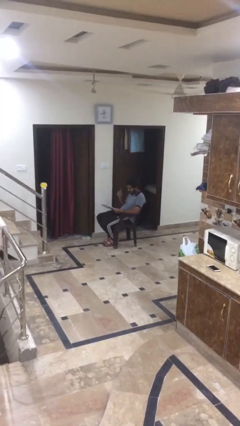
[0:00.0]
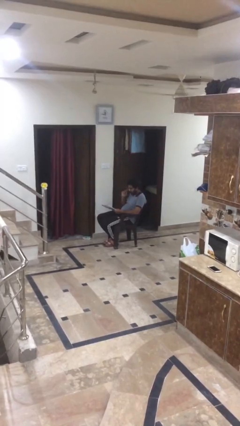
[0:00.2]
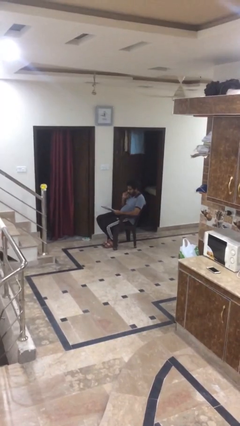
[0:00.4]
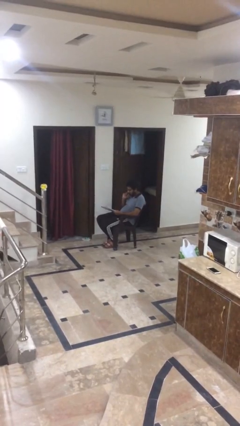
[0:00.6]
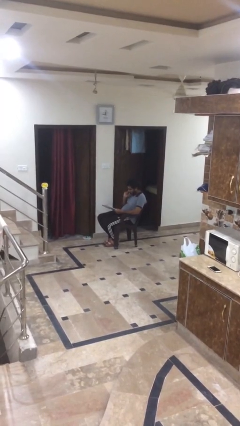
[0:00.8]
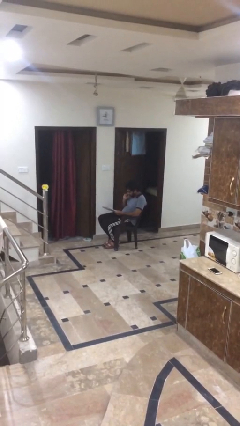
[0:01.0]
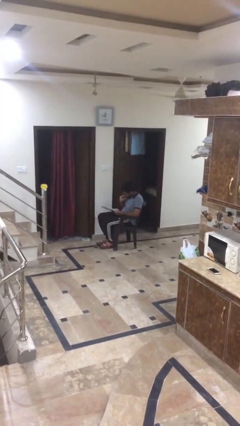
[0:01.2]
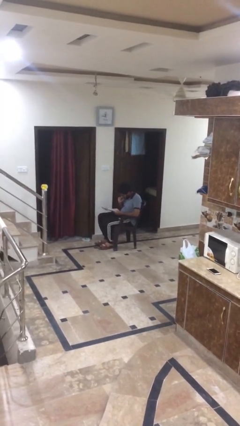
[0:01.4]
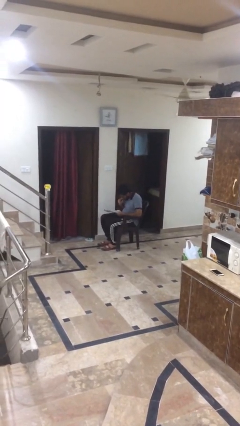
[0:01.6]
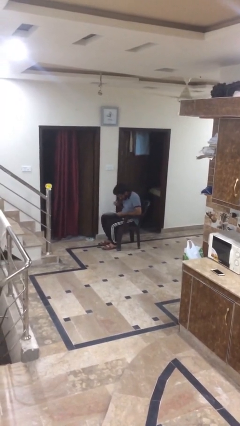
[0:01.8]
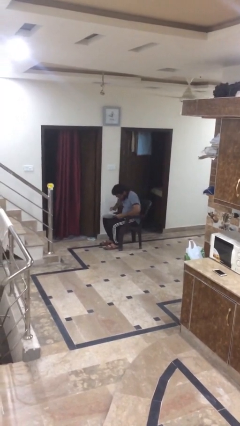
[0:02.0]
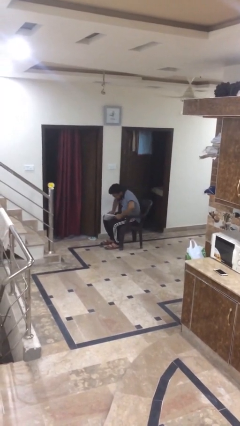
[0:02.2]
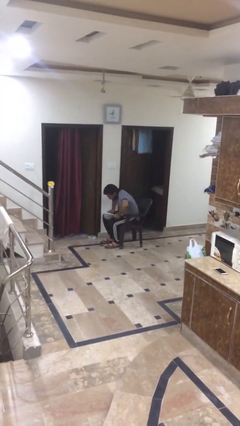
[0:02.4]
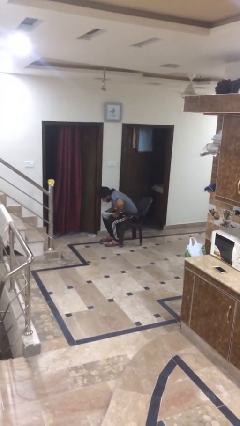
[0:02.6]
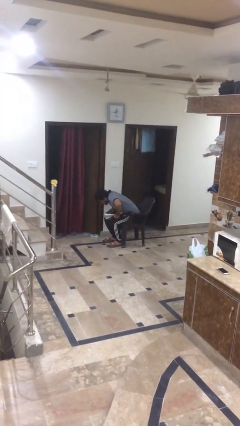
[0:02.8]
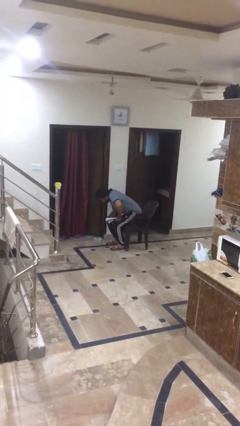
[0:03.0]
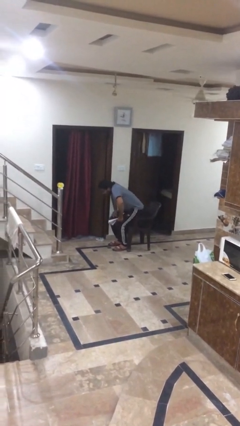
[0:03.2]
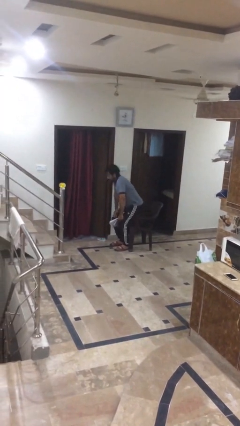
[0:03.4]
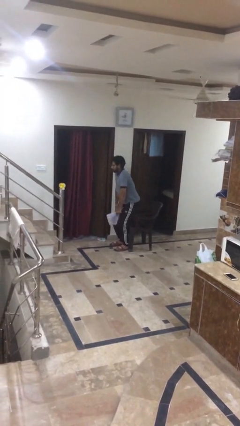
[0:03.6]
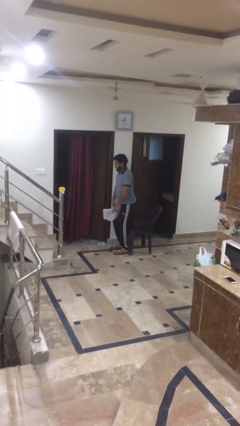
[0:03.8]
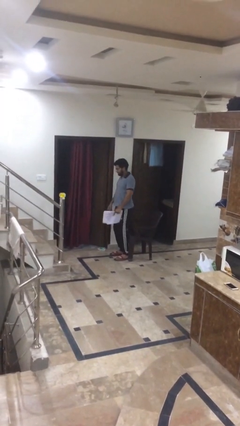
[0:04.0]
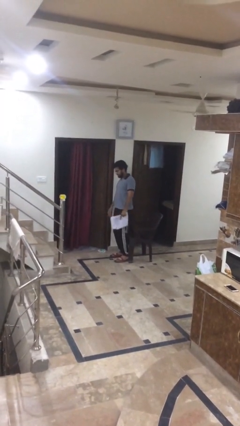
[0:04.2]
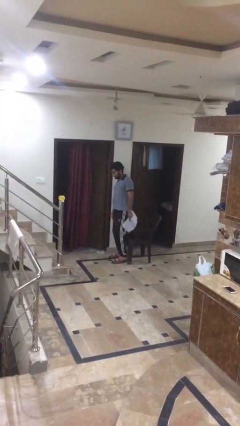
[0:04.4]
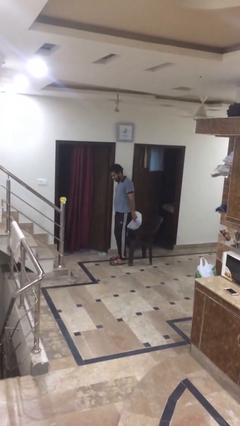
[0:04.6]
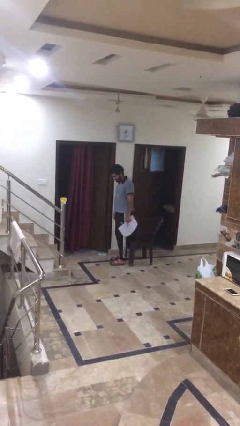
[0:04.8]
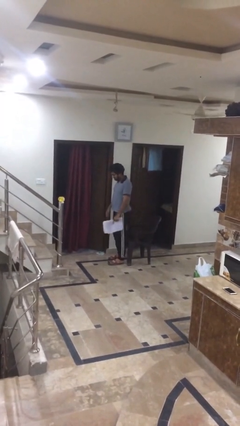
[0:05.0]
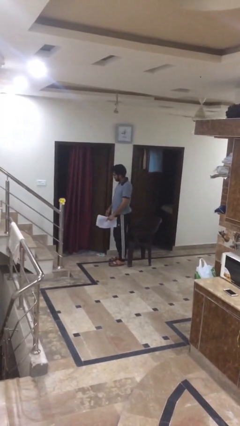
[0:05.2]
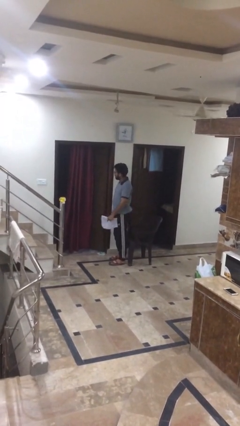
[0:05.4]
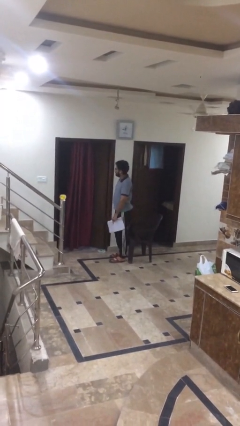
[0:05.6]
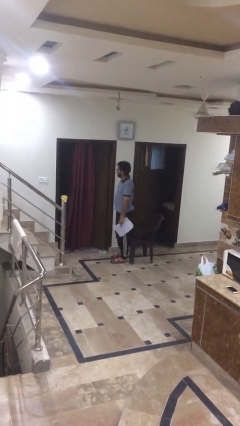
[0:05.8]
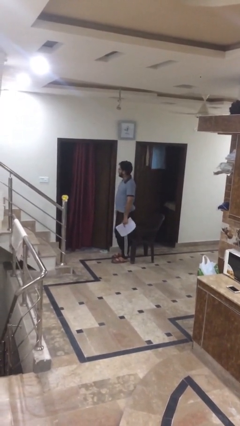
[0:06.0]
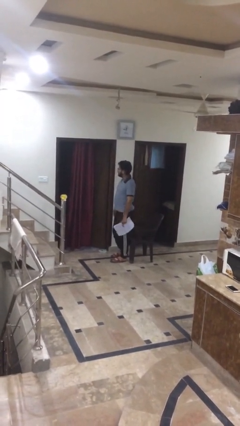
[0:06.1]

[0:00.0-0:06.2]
person stands up

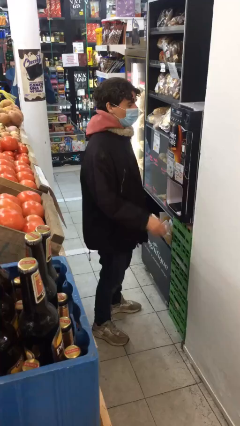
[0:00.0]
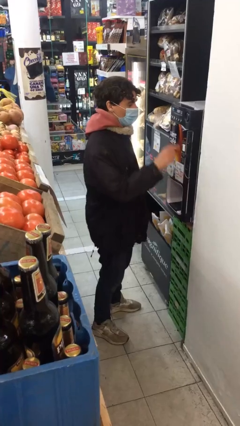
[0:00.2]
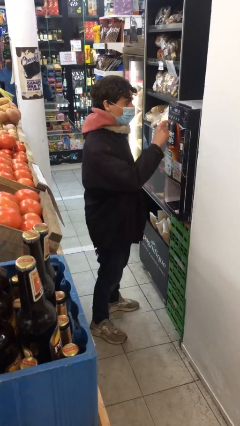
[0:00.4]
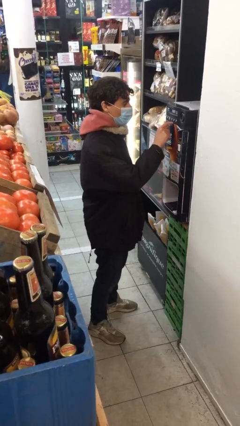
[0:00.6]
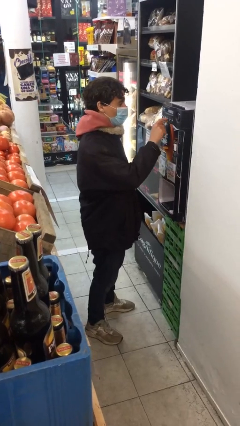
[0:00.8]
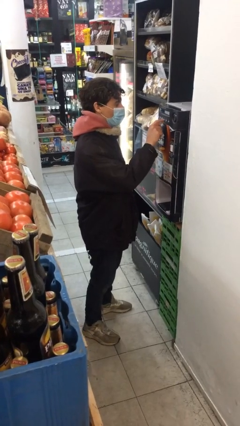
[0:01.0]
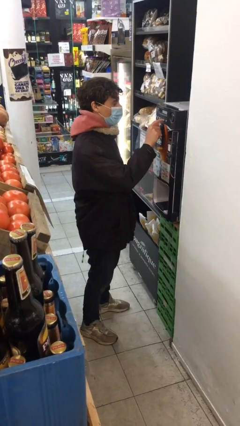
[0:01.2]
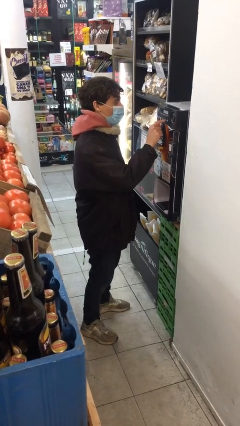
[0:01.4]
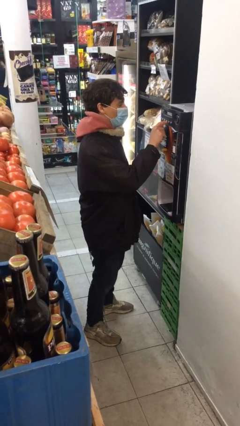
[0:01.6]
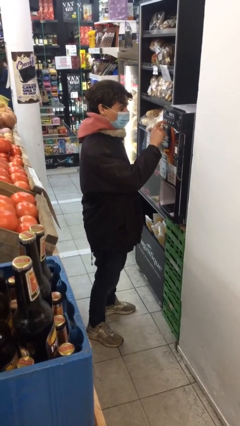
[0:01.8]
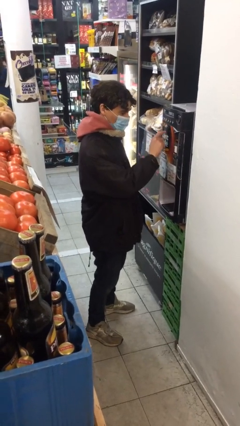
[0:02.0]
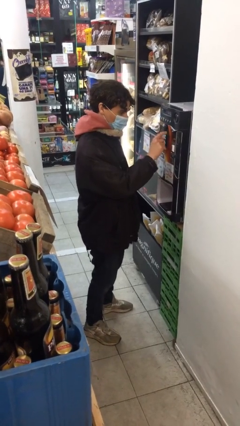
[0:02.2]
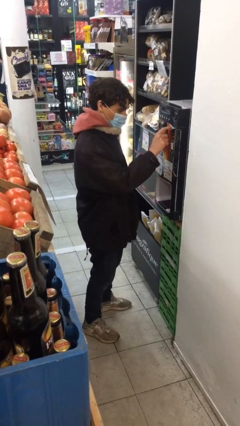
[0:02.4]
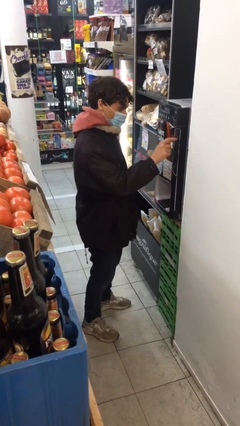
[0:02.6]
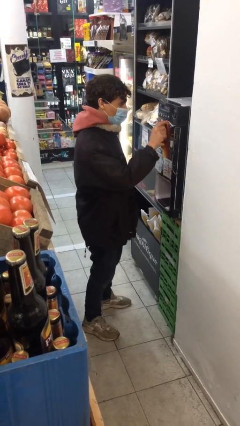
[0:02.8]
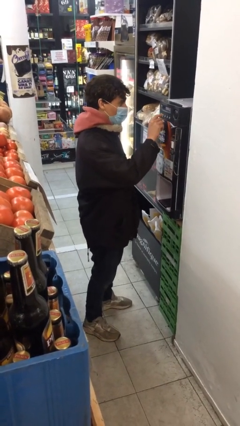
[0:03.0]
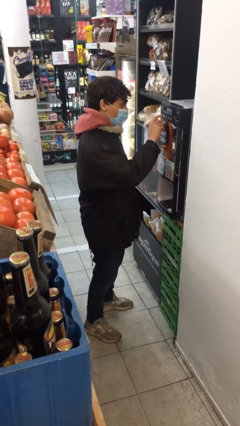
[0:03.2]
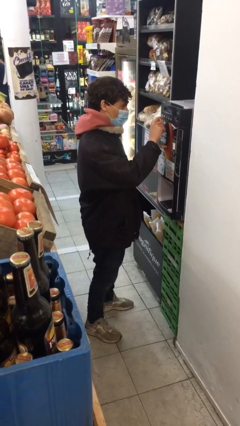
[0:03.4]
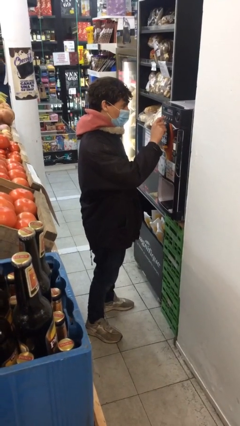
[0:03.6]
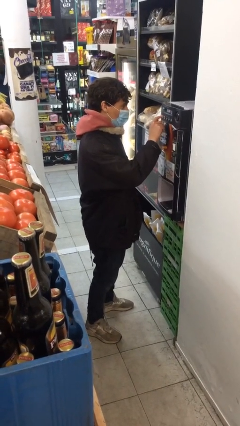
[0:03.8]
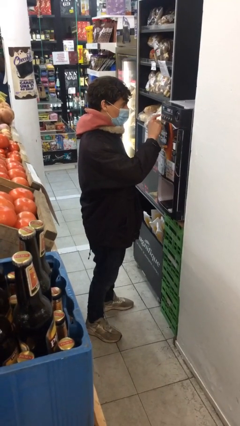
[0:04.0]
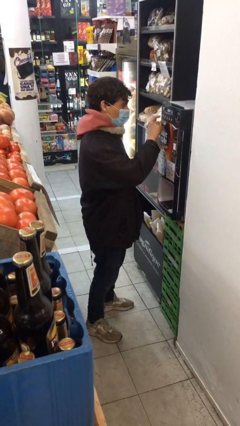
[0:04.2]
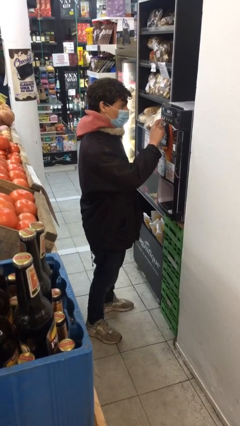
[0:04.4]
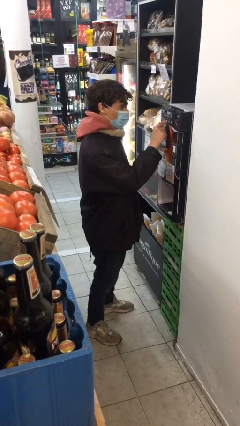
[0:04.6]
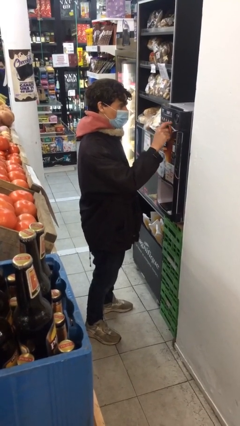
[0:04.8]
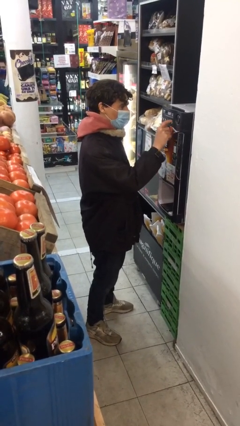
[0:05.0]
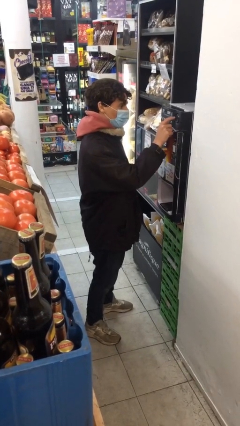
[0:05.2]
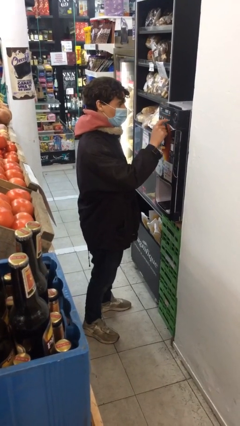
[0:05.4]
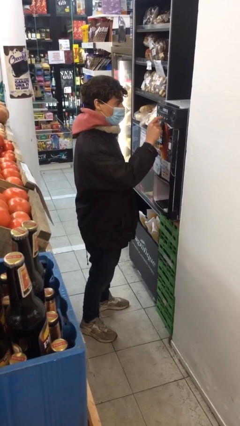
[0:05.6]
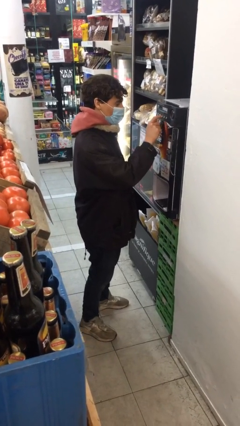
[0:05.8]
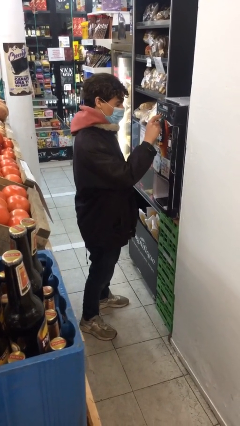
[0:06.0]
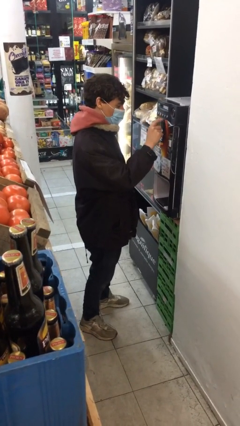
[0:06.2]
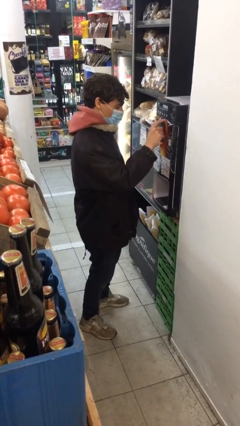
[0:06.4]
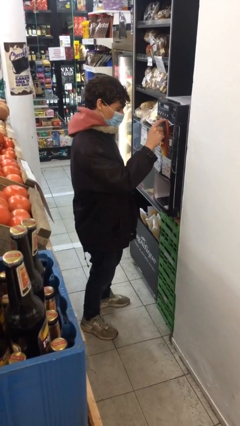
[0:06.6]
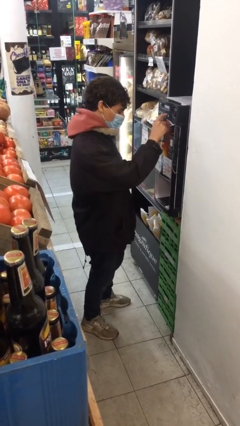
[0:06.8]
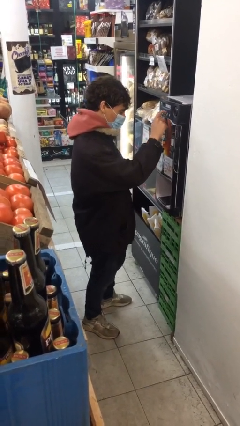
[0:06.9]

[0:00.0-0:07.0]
person purchases from machine

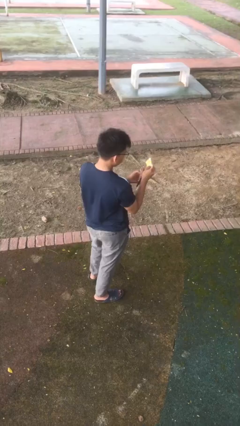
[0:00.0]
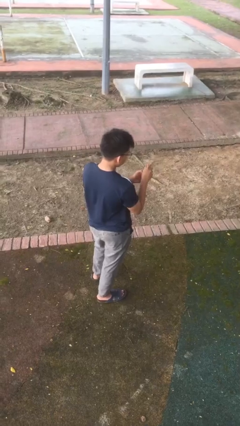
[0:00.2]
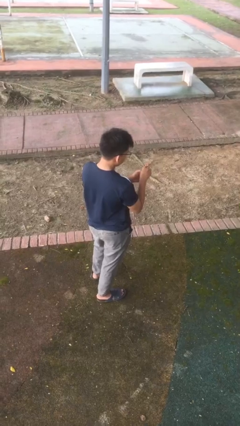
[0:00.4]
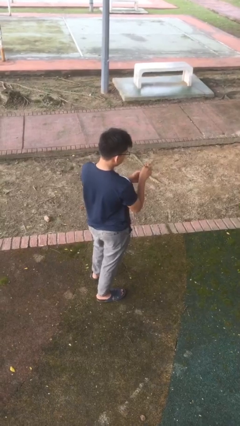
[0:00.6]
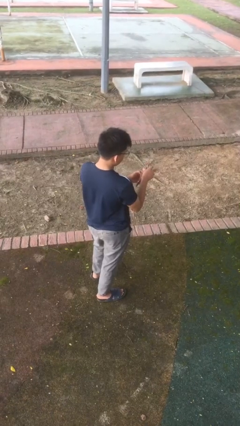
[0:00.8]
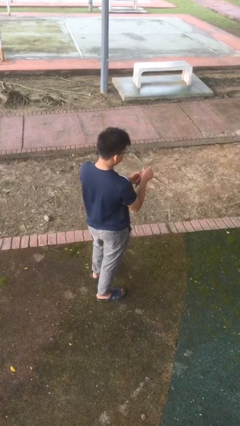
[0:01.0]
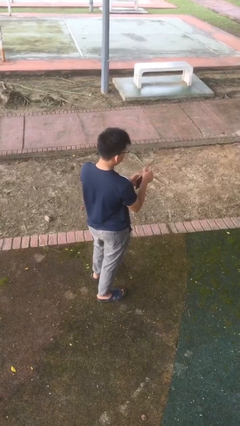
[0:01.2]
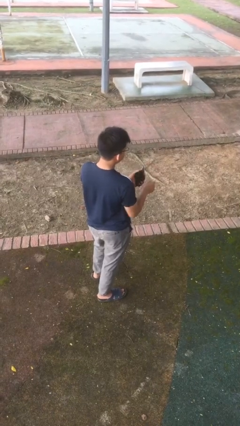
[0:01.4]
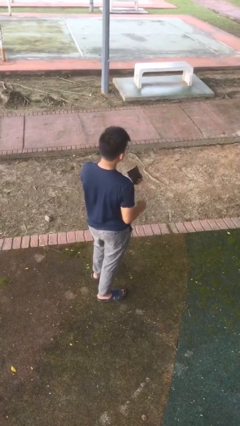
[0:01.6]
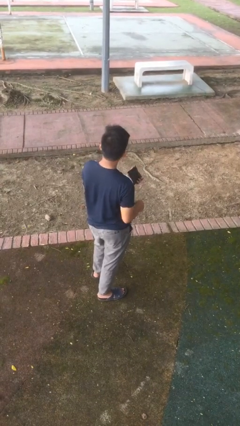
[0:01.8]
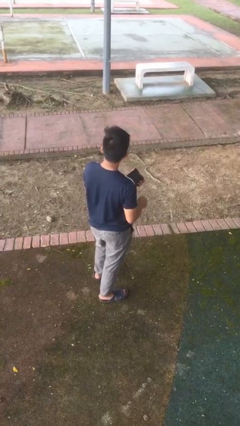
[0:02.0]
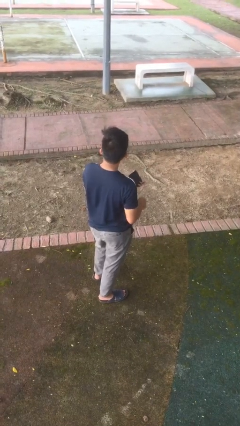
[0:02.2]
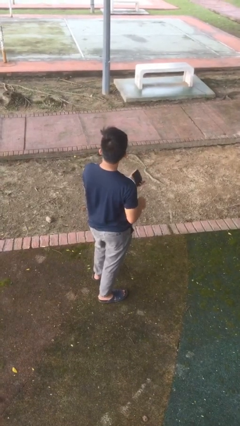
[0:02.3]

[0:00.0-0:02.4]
person puts object into purse

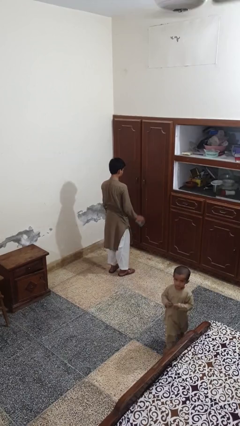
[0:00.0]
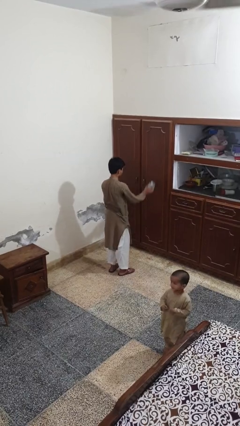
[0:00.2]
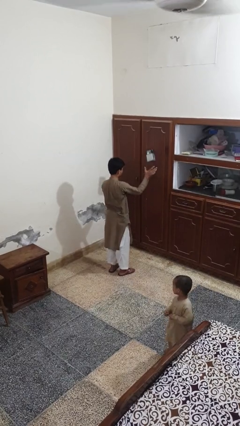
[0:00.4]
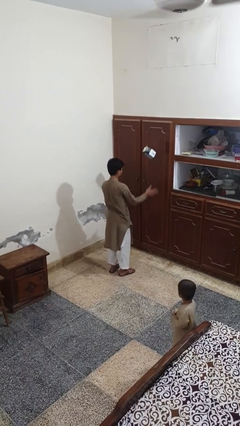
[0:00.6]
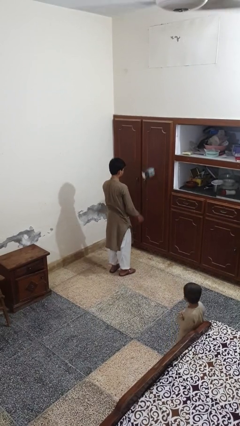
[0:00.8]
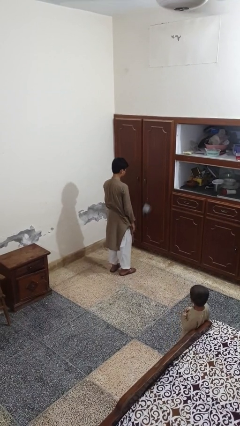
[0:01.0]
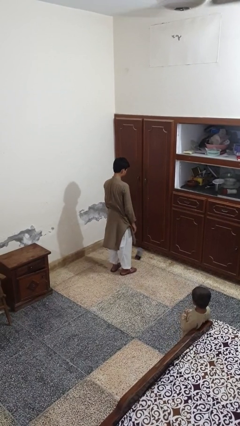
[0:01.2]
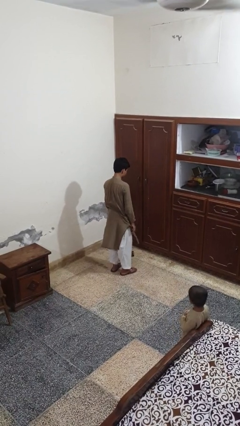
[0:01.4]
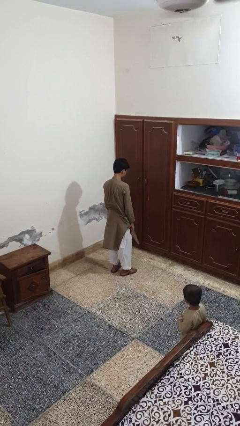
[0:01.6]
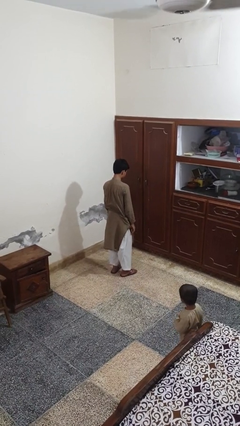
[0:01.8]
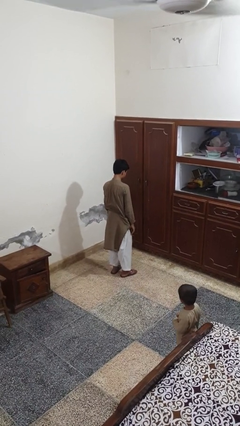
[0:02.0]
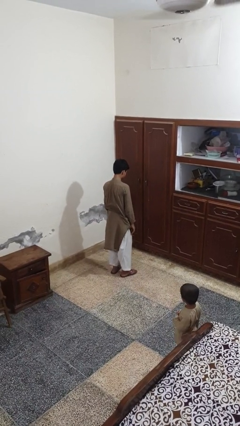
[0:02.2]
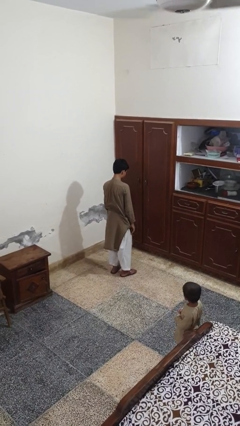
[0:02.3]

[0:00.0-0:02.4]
person throws object into air
